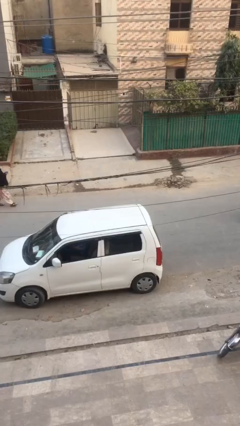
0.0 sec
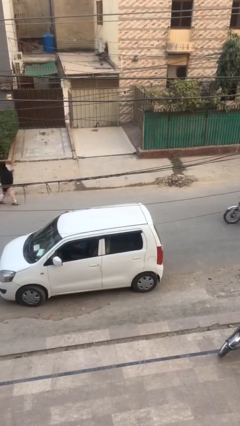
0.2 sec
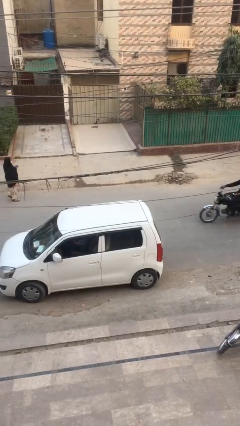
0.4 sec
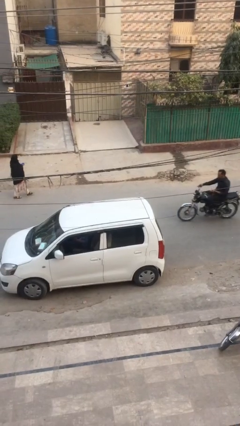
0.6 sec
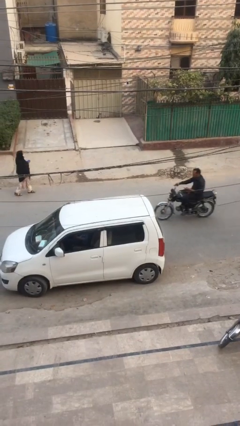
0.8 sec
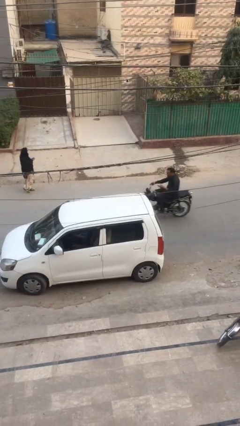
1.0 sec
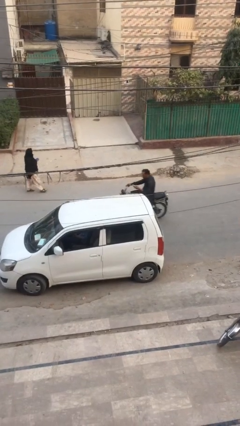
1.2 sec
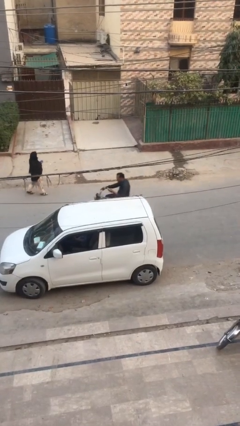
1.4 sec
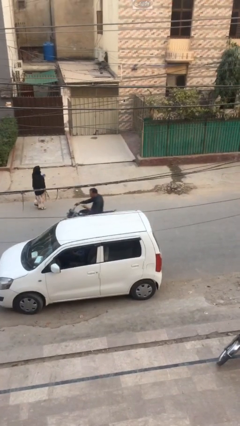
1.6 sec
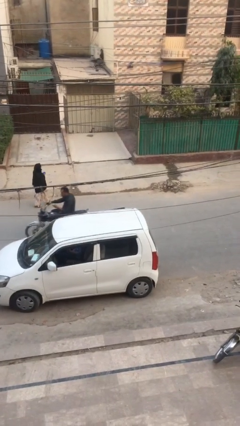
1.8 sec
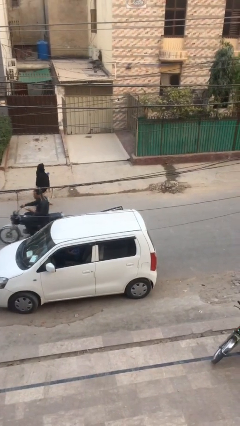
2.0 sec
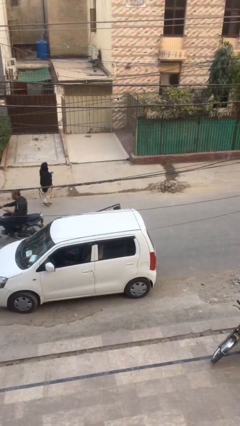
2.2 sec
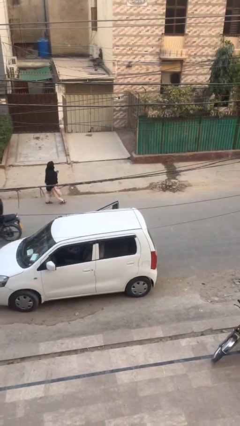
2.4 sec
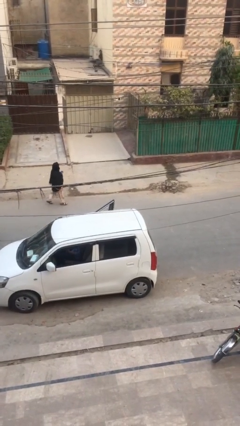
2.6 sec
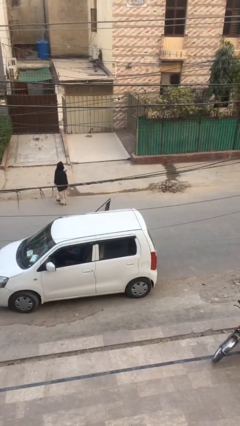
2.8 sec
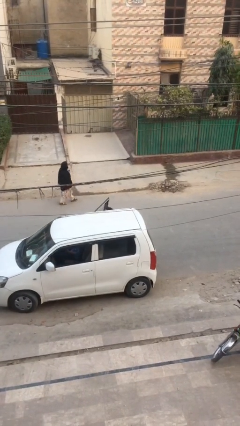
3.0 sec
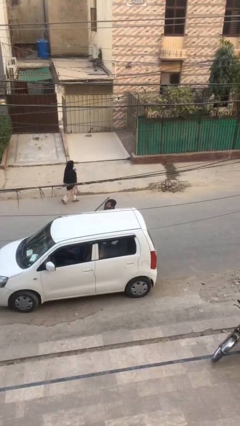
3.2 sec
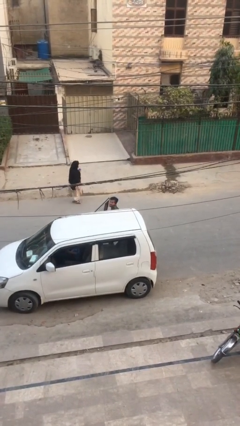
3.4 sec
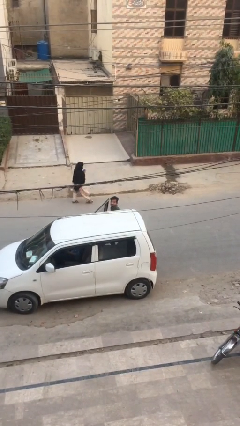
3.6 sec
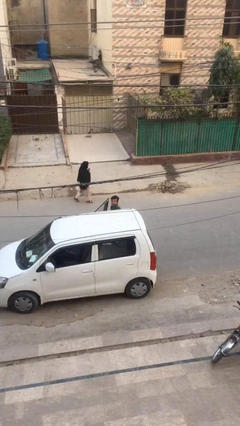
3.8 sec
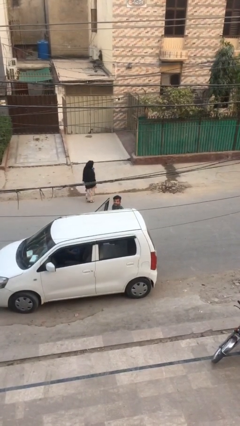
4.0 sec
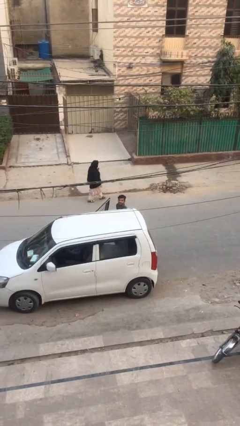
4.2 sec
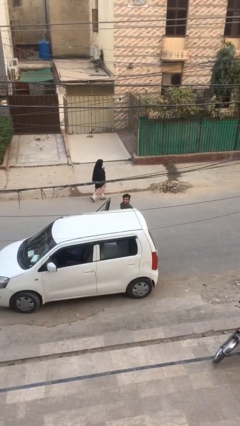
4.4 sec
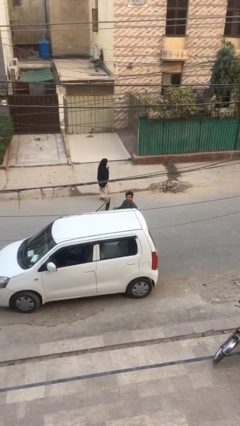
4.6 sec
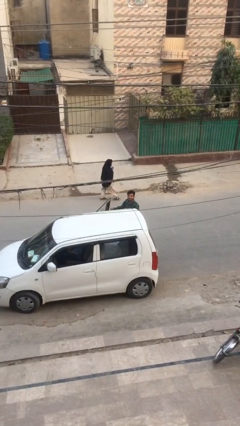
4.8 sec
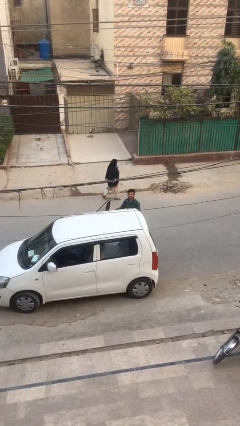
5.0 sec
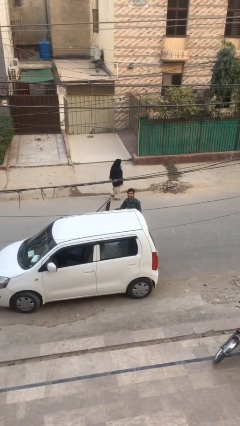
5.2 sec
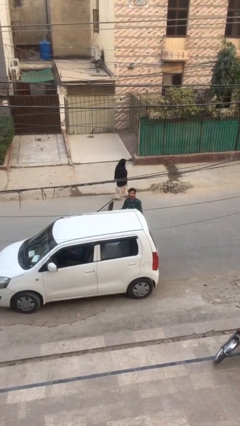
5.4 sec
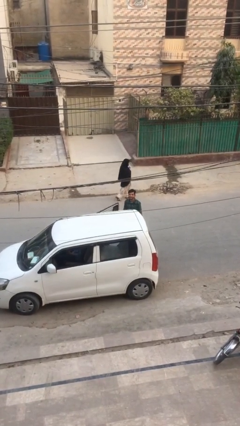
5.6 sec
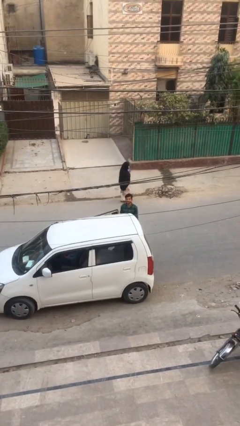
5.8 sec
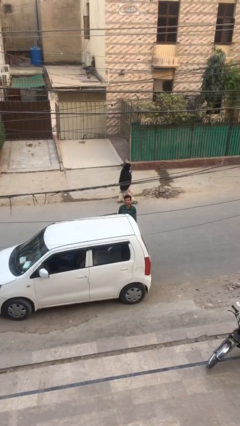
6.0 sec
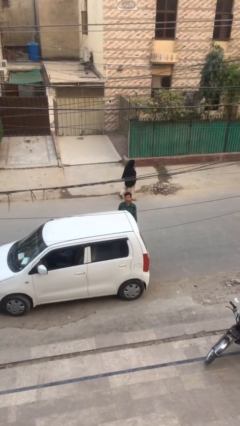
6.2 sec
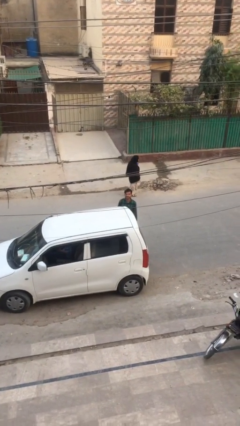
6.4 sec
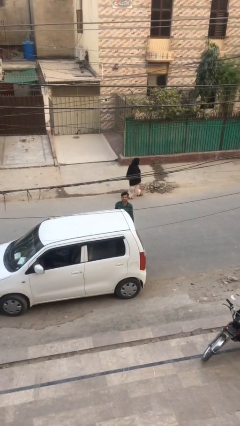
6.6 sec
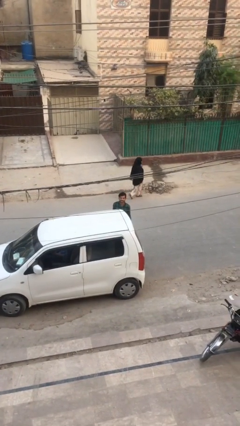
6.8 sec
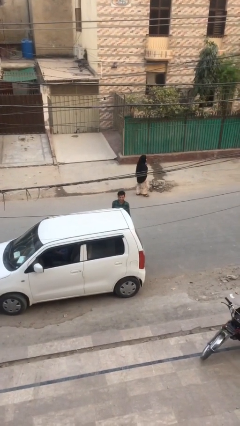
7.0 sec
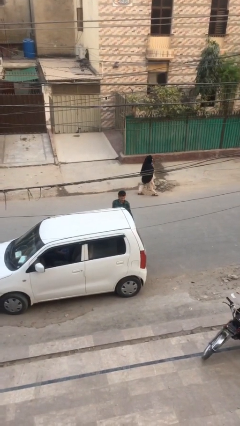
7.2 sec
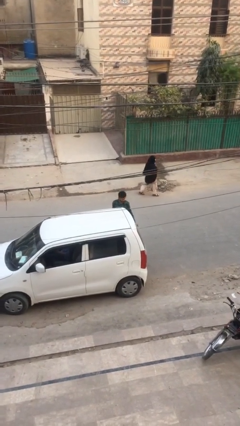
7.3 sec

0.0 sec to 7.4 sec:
car drops off person

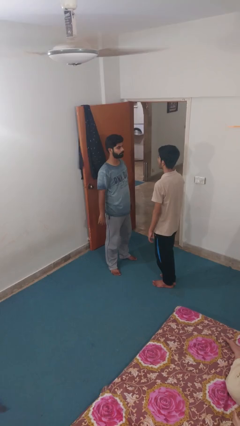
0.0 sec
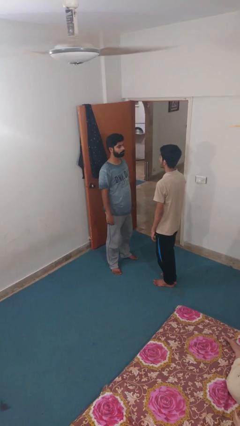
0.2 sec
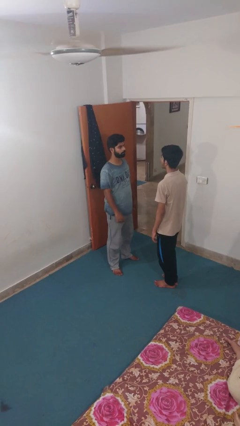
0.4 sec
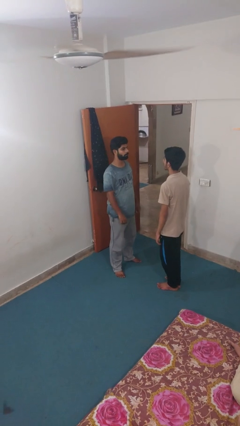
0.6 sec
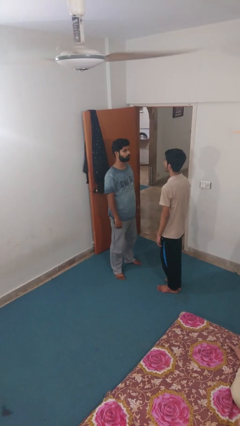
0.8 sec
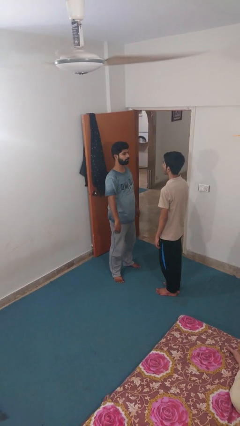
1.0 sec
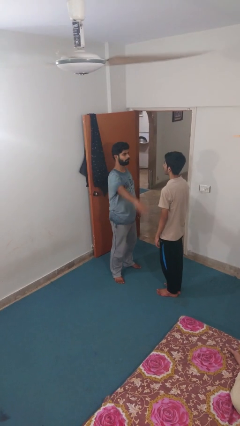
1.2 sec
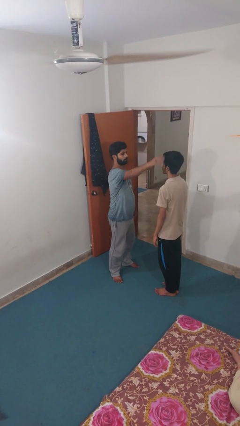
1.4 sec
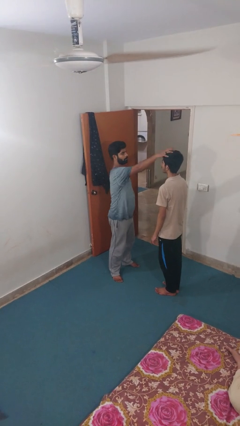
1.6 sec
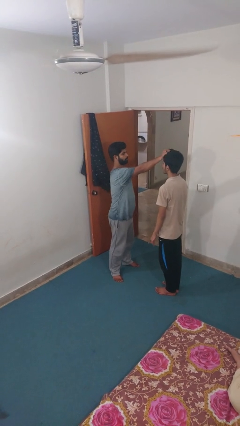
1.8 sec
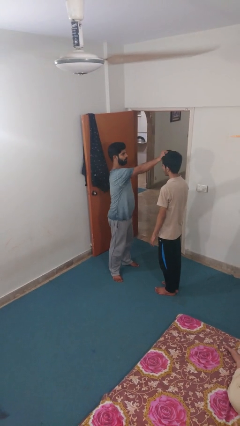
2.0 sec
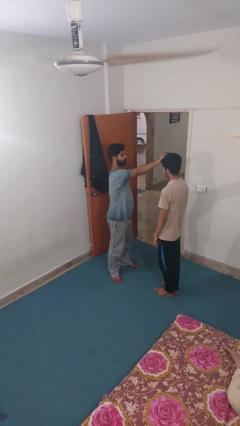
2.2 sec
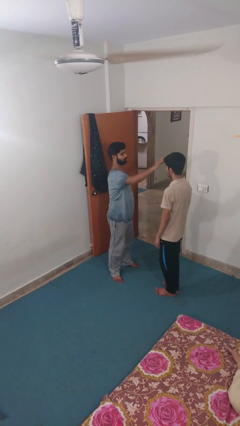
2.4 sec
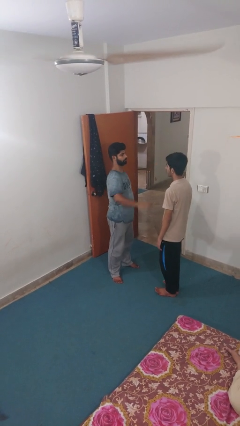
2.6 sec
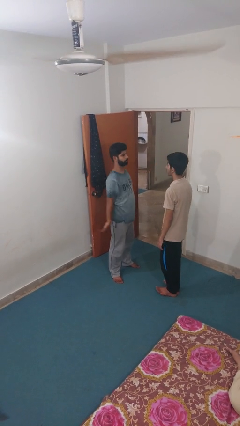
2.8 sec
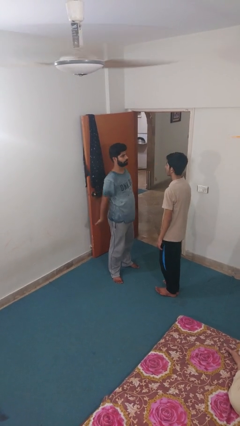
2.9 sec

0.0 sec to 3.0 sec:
person grabs person by hair

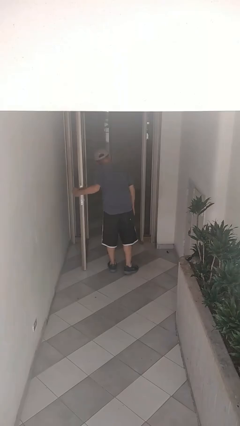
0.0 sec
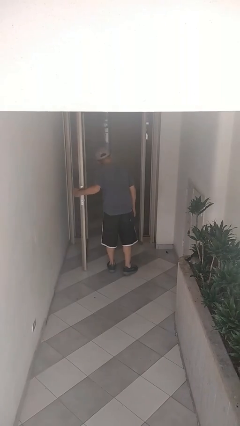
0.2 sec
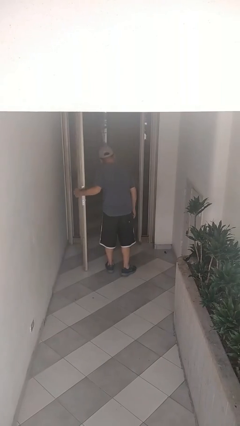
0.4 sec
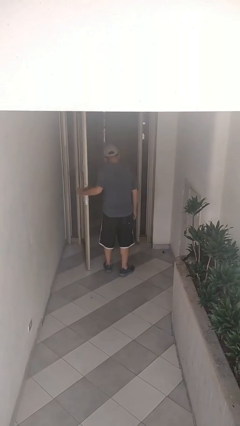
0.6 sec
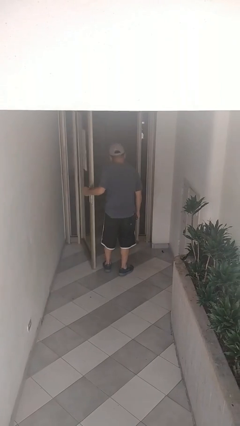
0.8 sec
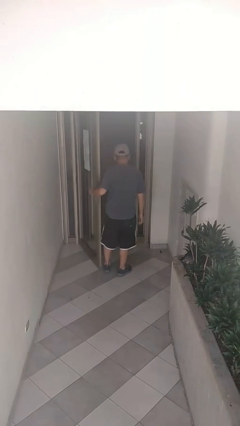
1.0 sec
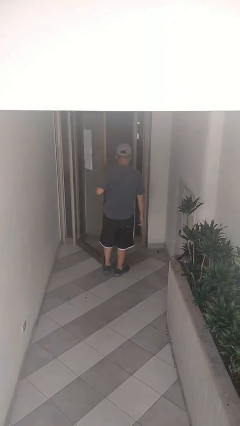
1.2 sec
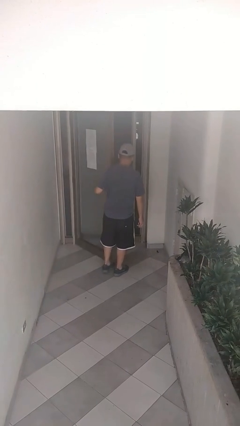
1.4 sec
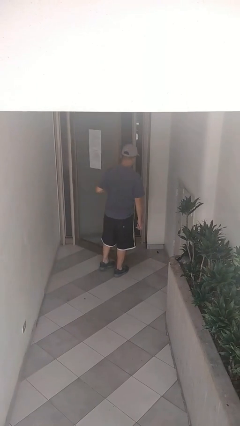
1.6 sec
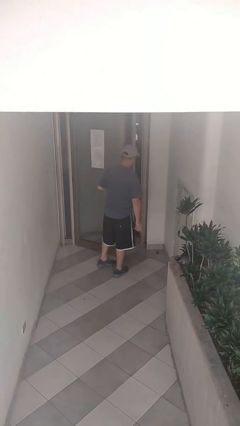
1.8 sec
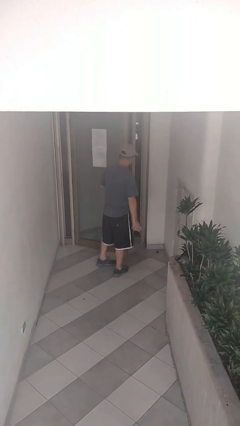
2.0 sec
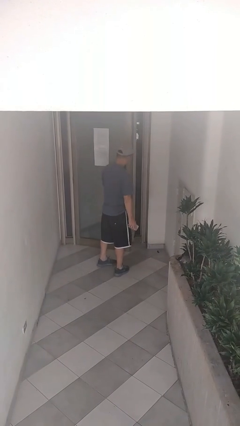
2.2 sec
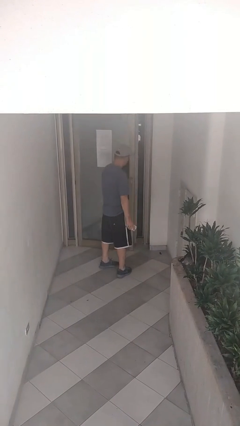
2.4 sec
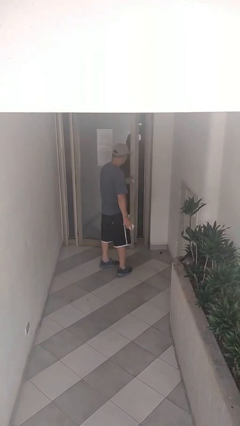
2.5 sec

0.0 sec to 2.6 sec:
person closes facility door

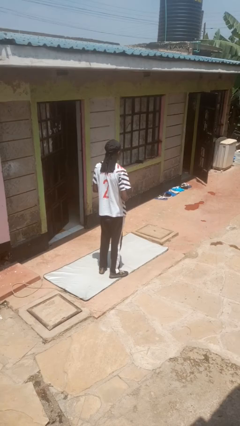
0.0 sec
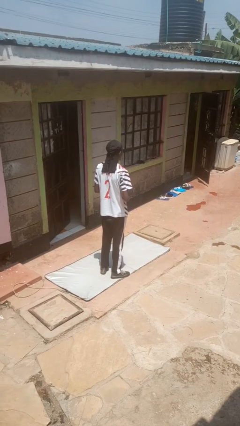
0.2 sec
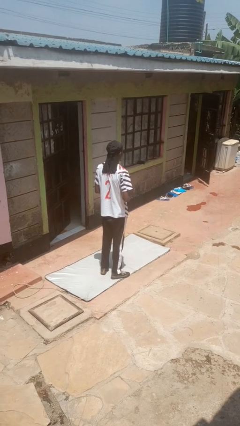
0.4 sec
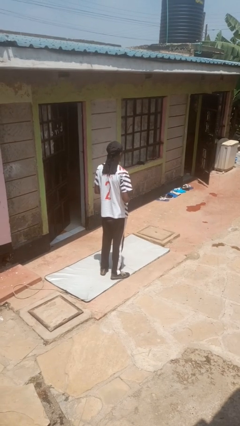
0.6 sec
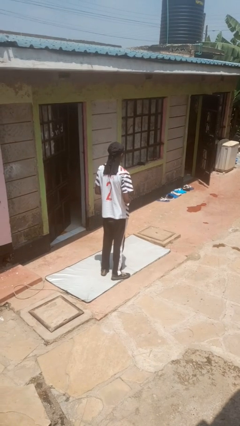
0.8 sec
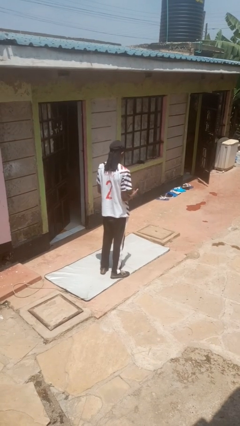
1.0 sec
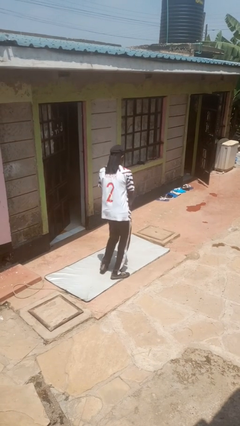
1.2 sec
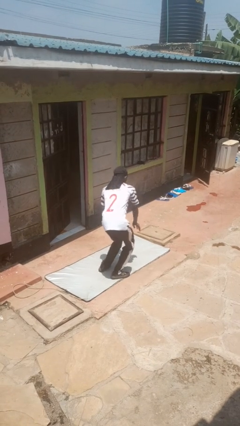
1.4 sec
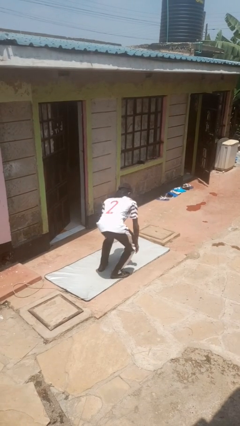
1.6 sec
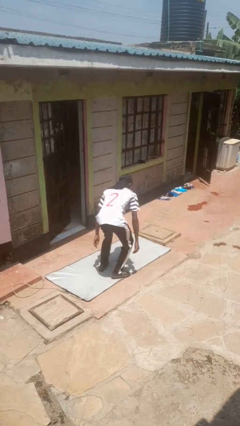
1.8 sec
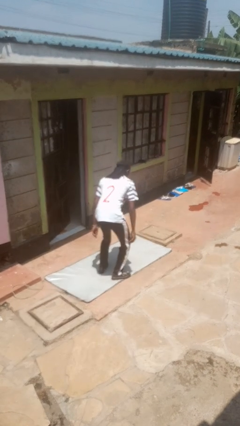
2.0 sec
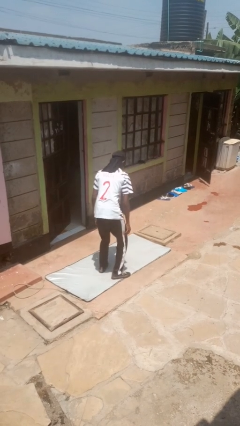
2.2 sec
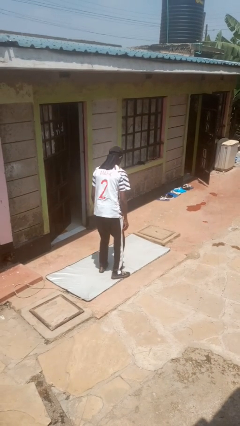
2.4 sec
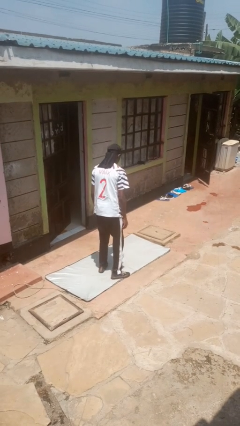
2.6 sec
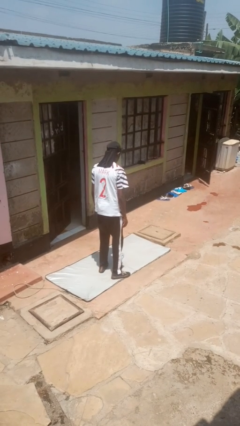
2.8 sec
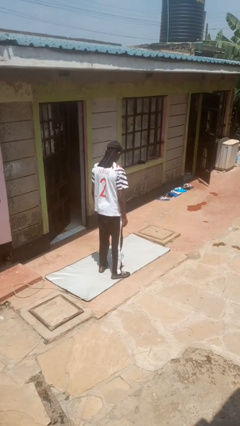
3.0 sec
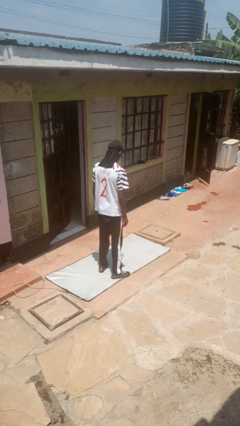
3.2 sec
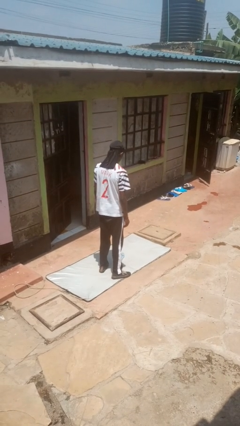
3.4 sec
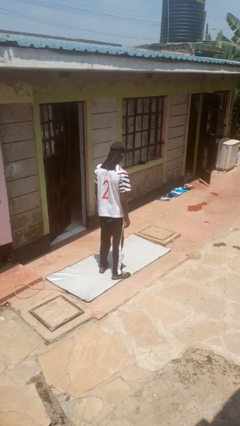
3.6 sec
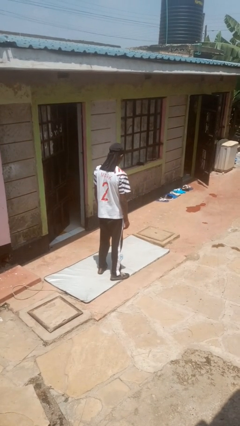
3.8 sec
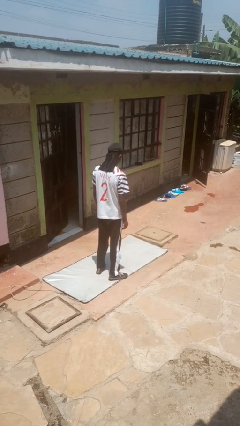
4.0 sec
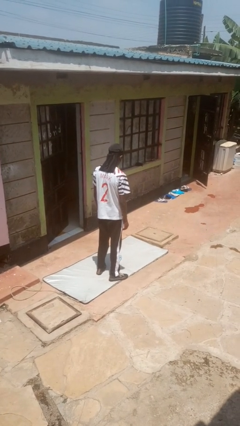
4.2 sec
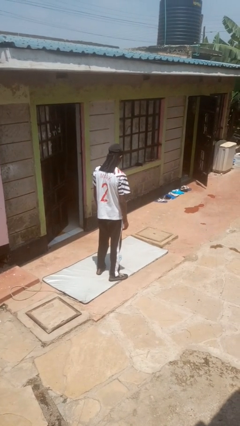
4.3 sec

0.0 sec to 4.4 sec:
person drops object

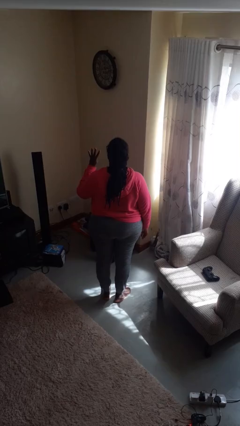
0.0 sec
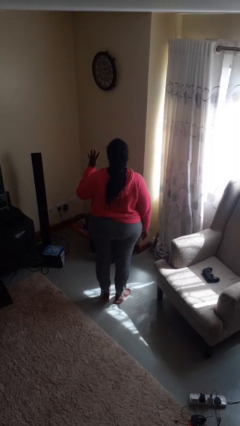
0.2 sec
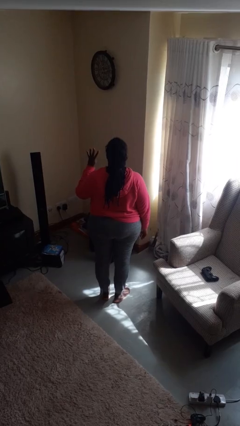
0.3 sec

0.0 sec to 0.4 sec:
person gestures number four
